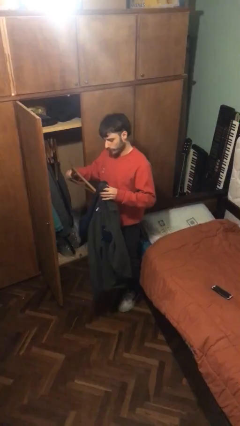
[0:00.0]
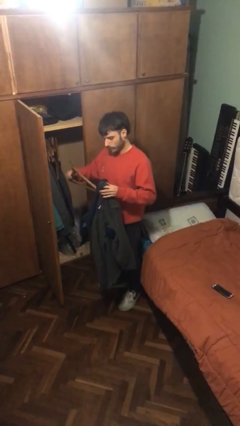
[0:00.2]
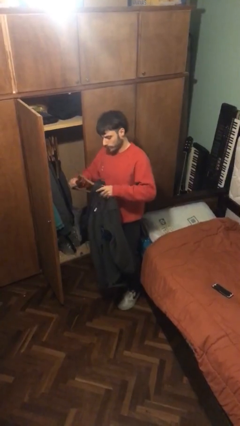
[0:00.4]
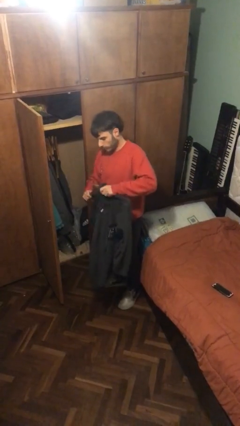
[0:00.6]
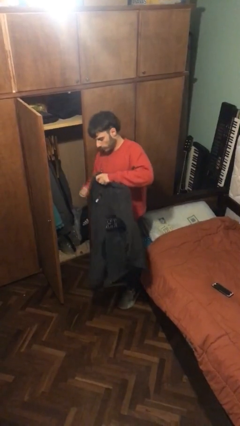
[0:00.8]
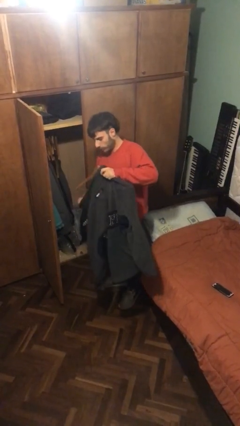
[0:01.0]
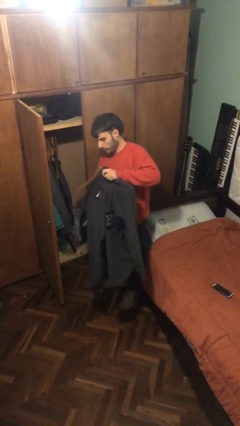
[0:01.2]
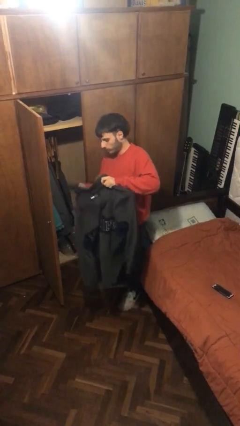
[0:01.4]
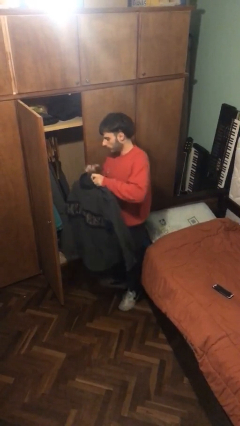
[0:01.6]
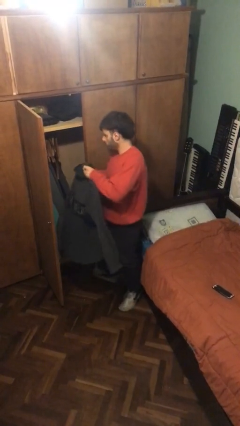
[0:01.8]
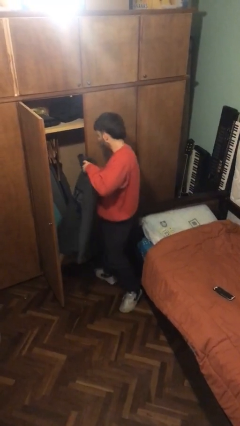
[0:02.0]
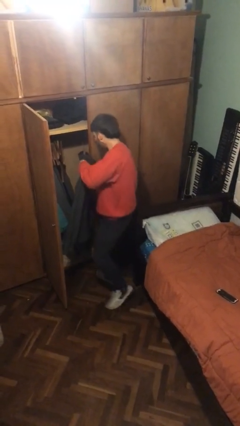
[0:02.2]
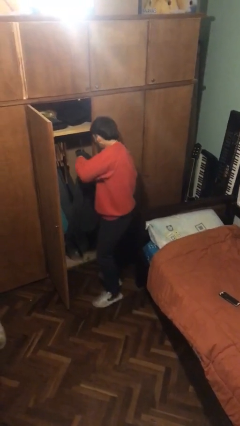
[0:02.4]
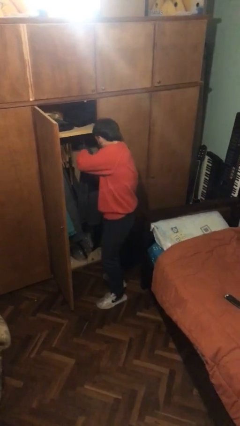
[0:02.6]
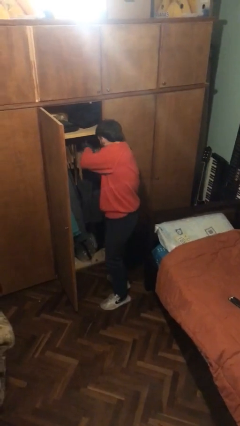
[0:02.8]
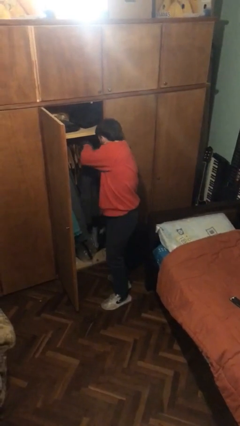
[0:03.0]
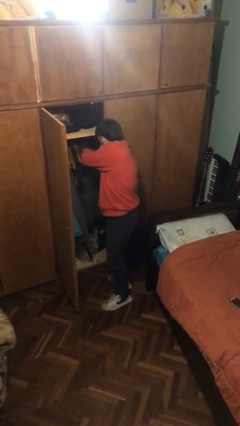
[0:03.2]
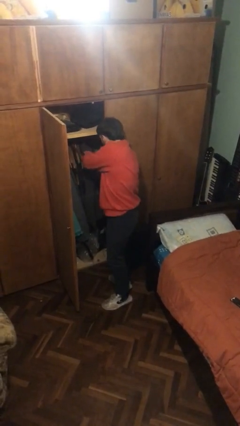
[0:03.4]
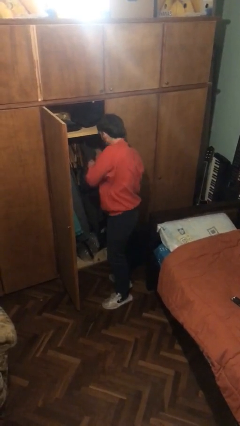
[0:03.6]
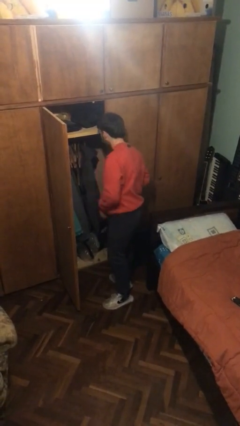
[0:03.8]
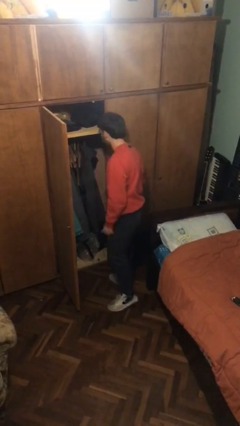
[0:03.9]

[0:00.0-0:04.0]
person puts clothes into closet

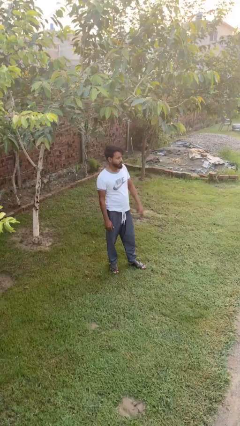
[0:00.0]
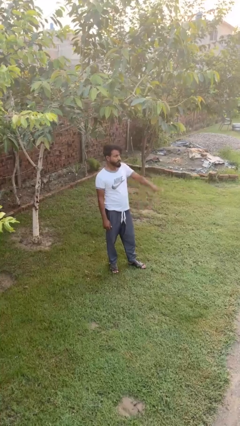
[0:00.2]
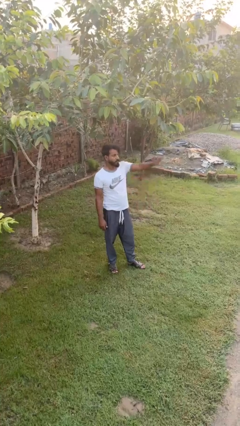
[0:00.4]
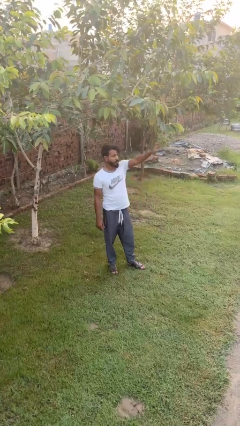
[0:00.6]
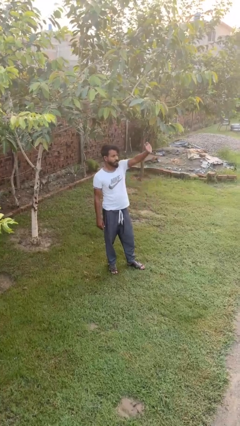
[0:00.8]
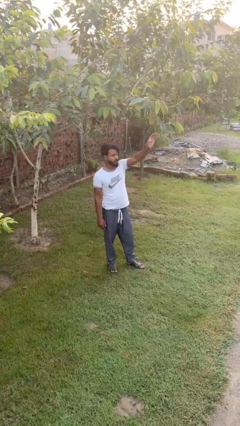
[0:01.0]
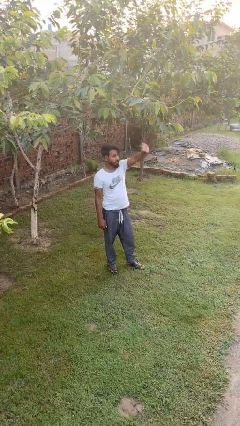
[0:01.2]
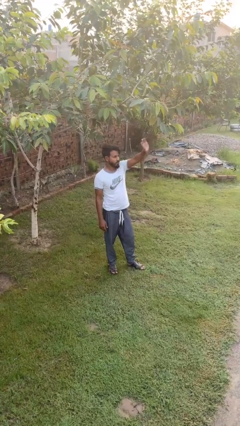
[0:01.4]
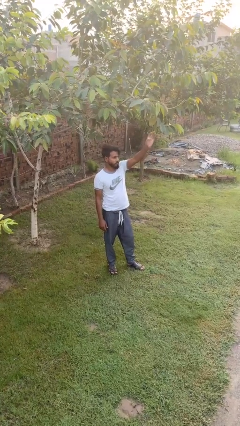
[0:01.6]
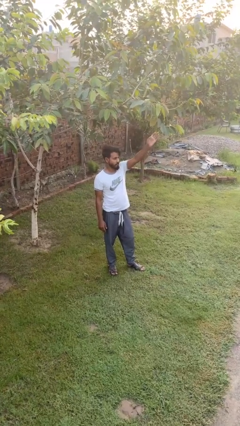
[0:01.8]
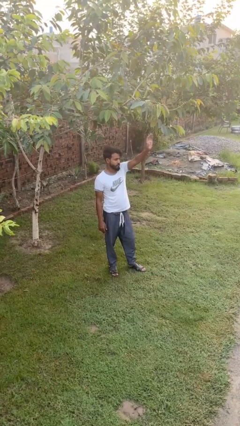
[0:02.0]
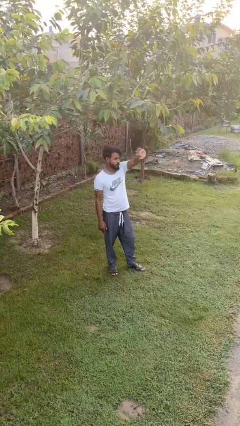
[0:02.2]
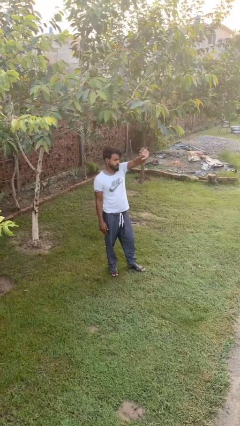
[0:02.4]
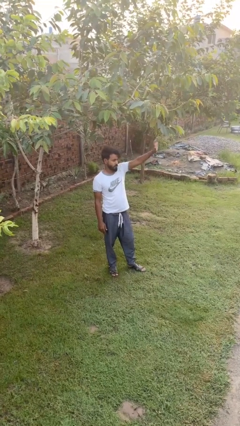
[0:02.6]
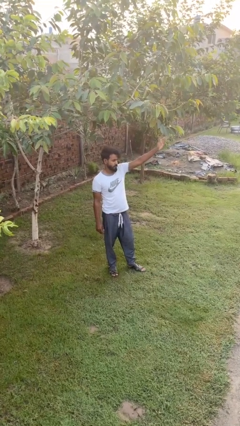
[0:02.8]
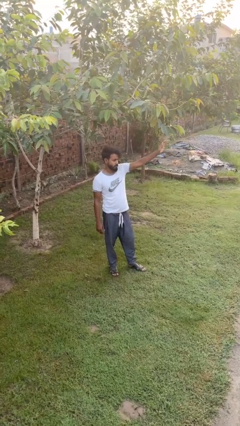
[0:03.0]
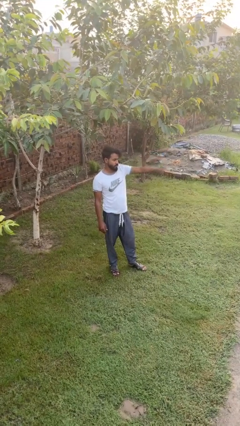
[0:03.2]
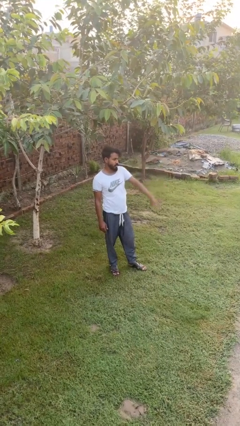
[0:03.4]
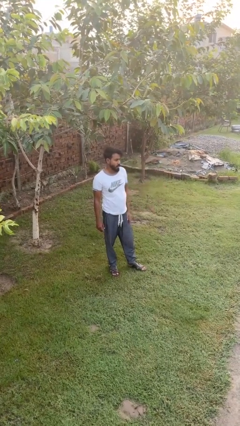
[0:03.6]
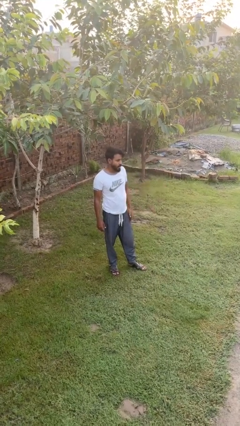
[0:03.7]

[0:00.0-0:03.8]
person waves at person

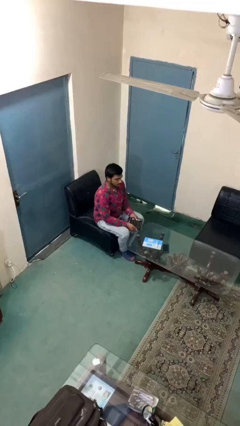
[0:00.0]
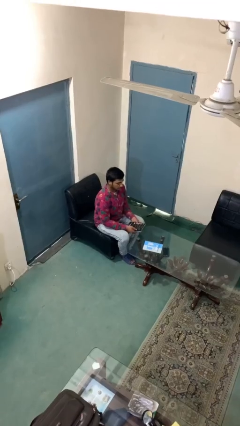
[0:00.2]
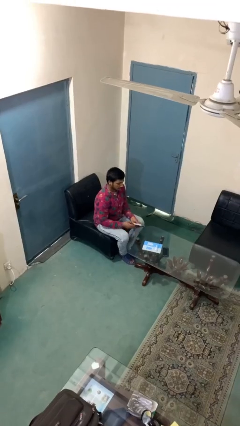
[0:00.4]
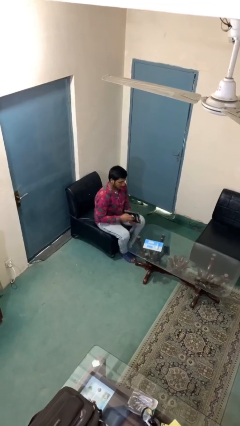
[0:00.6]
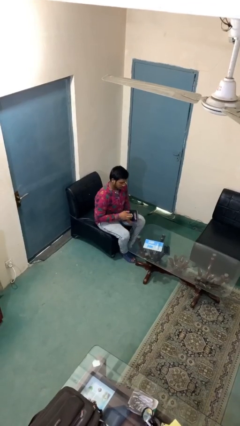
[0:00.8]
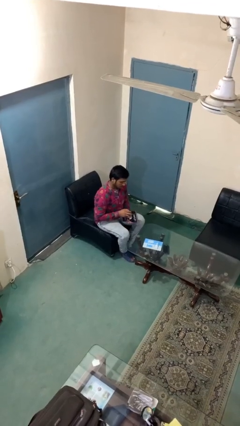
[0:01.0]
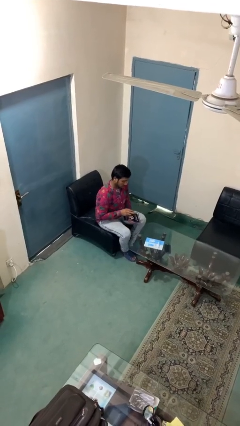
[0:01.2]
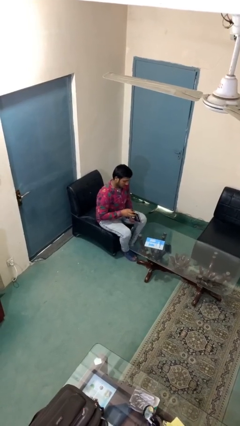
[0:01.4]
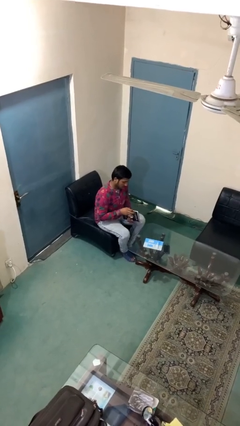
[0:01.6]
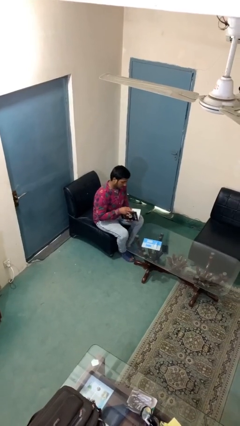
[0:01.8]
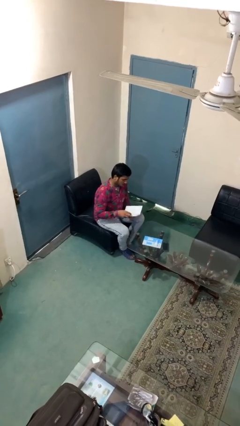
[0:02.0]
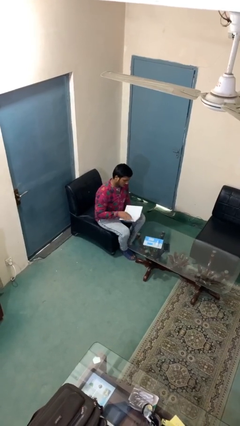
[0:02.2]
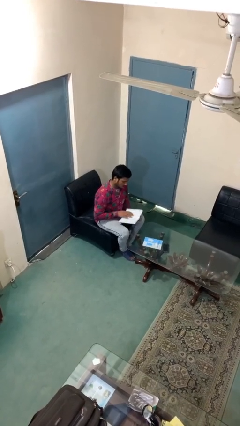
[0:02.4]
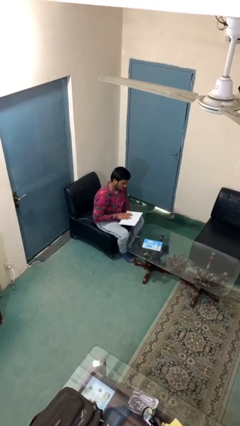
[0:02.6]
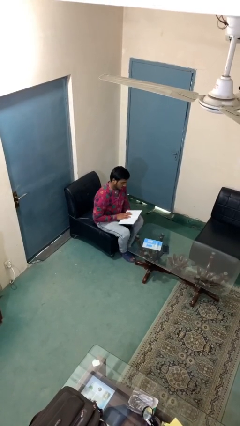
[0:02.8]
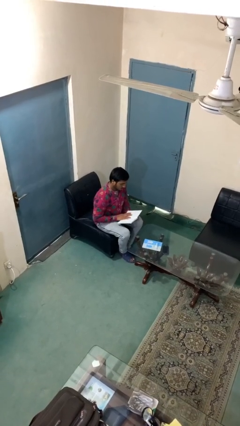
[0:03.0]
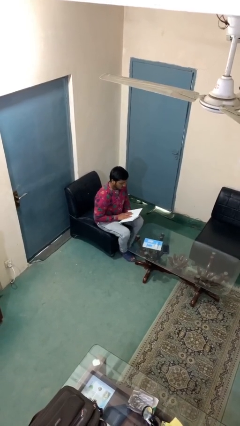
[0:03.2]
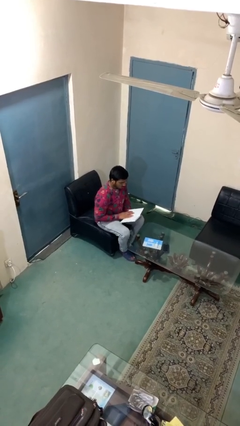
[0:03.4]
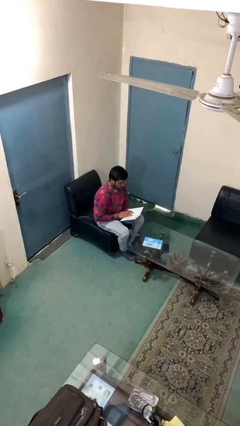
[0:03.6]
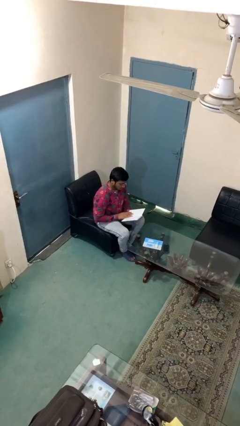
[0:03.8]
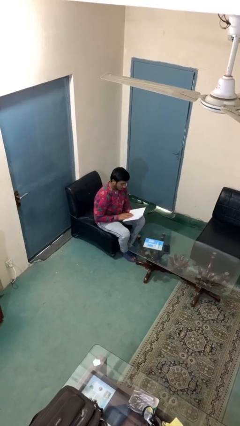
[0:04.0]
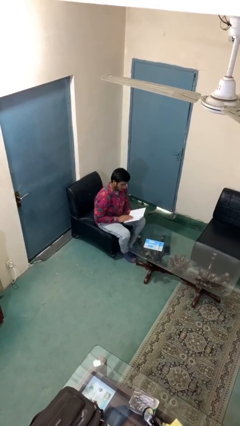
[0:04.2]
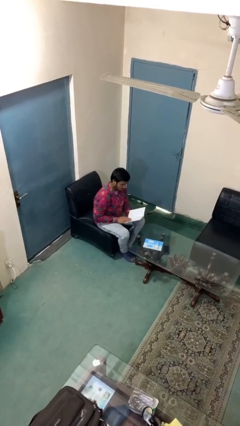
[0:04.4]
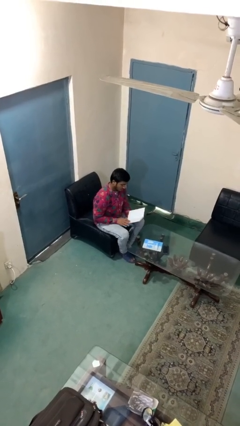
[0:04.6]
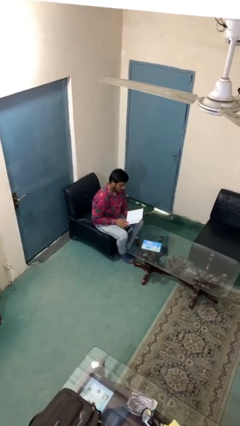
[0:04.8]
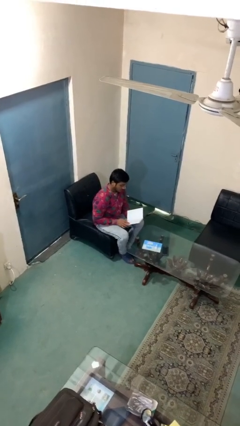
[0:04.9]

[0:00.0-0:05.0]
person reads document

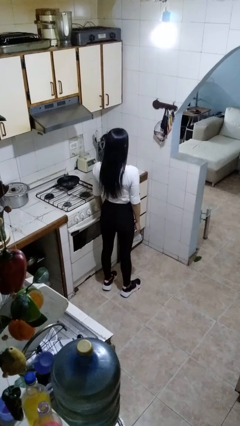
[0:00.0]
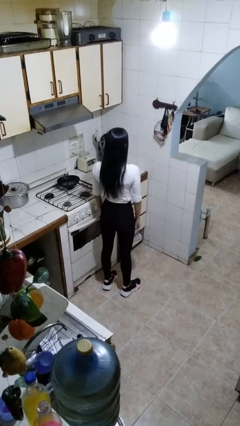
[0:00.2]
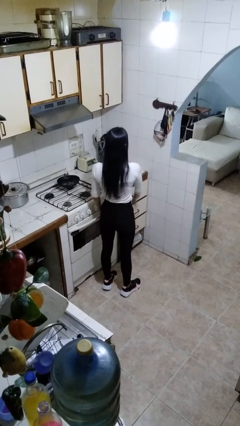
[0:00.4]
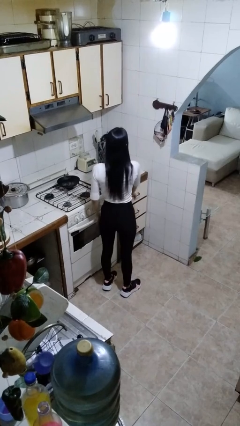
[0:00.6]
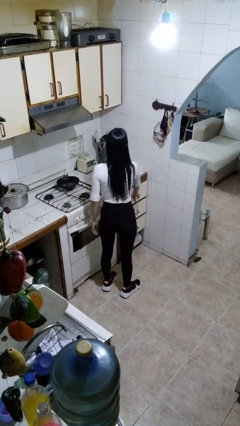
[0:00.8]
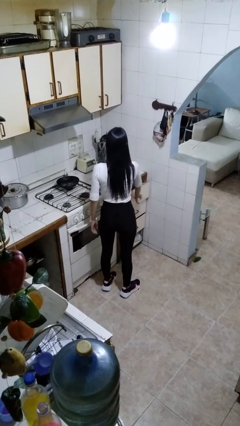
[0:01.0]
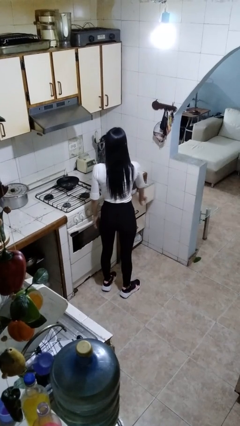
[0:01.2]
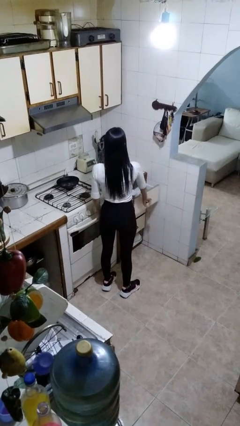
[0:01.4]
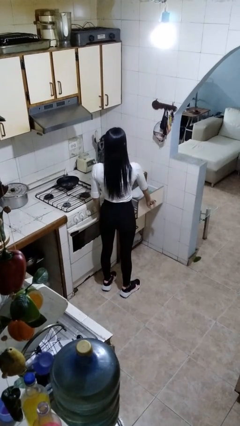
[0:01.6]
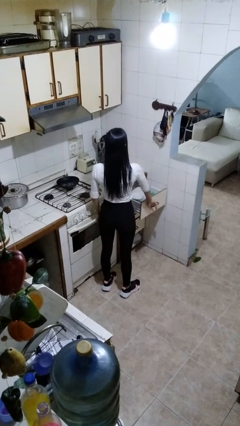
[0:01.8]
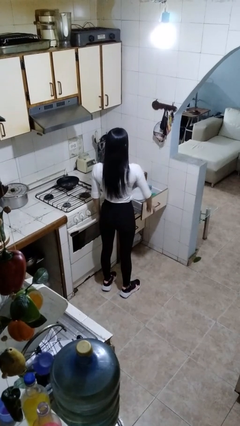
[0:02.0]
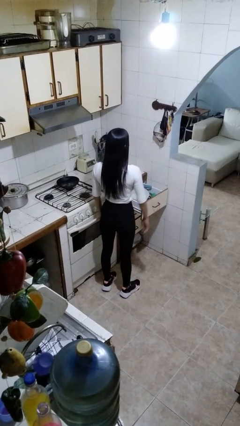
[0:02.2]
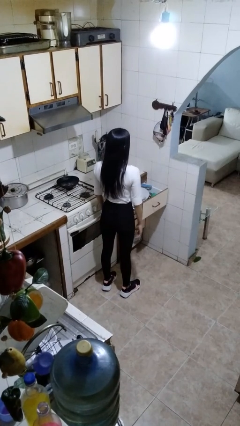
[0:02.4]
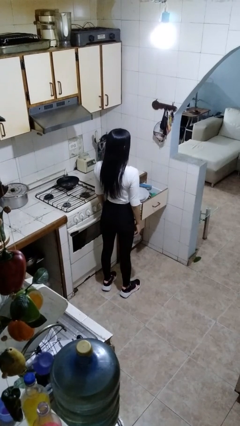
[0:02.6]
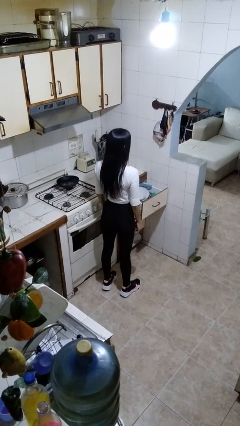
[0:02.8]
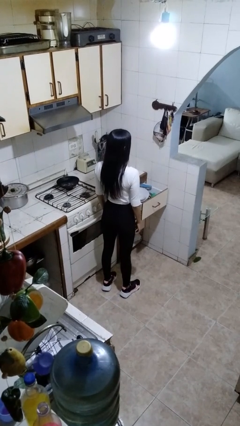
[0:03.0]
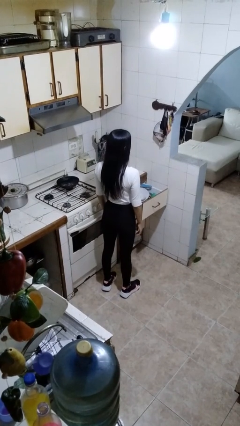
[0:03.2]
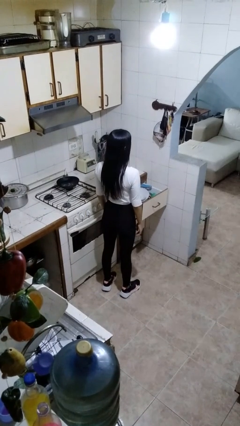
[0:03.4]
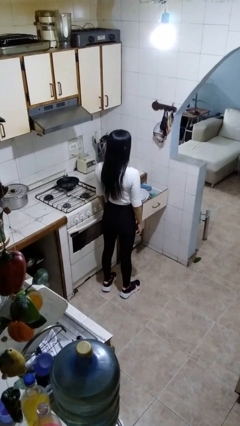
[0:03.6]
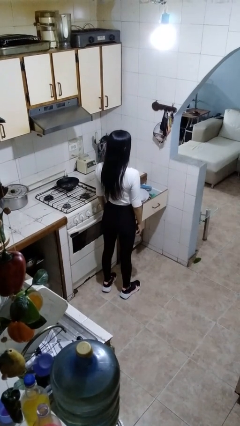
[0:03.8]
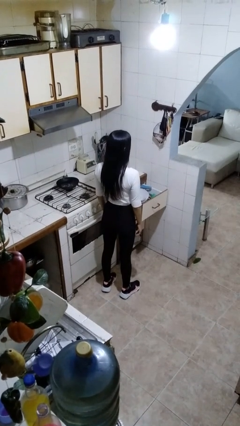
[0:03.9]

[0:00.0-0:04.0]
person opens kitchen drawer

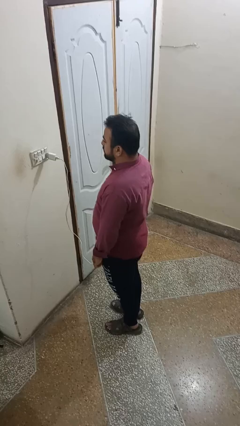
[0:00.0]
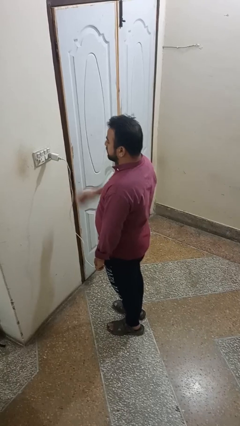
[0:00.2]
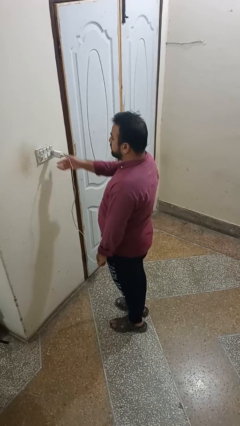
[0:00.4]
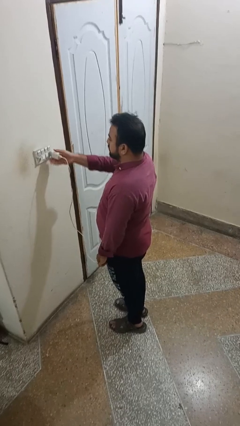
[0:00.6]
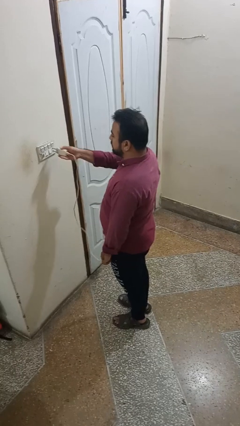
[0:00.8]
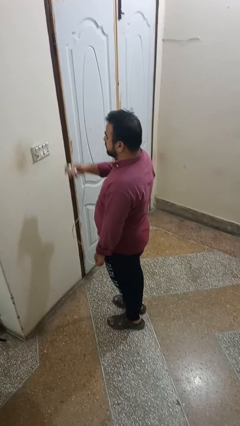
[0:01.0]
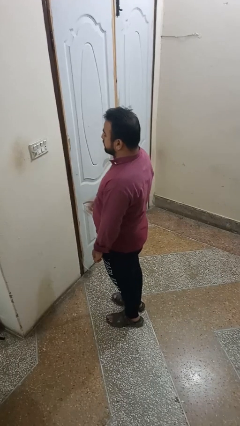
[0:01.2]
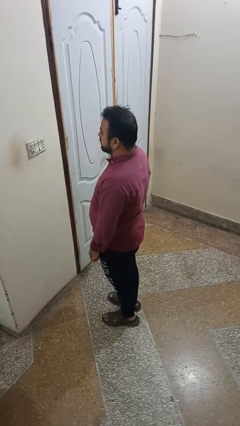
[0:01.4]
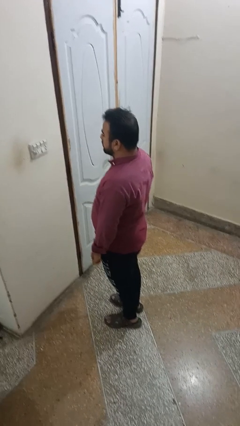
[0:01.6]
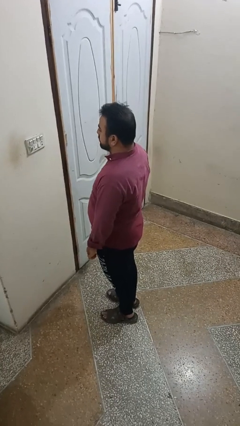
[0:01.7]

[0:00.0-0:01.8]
person unplugs from electrical socket
